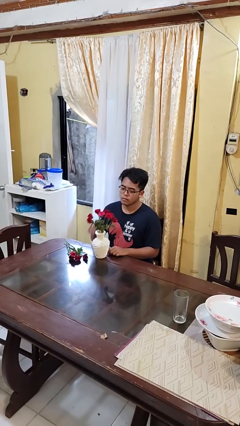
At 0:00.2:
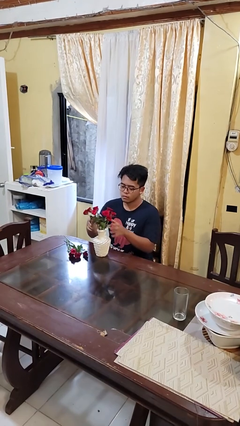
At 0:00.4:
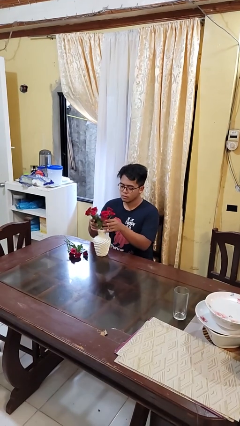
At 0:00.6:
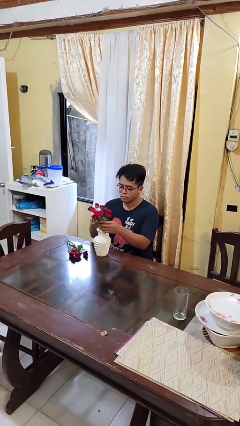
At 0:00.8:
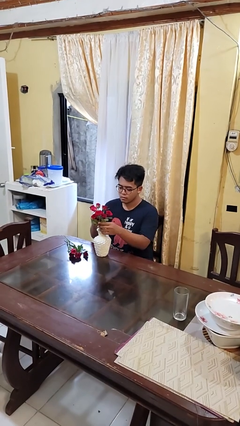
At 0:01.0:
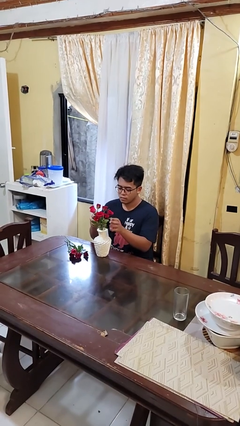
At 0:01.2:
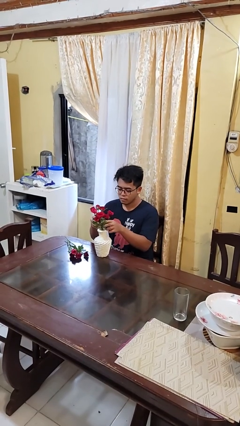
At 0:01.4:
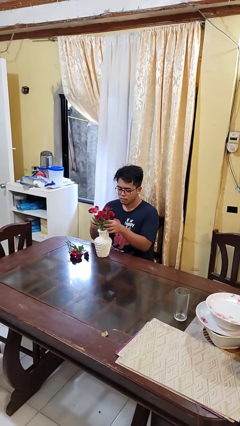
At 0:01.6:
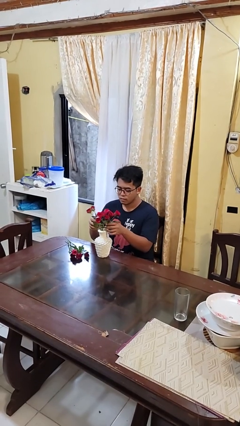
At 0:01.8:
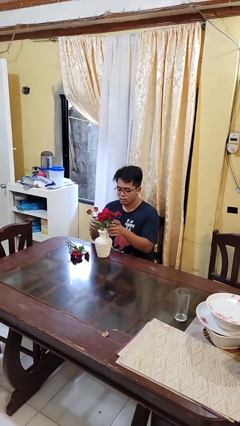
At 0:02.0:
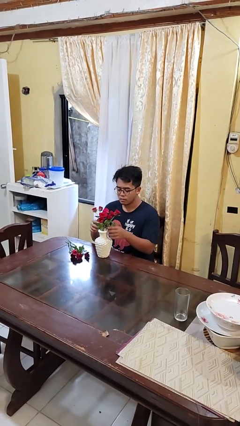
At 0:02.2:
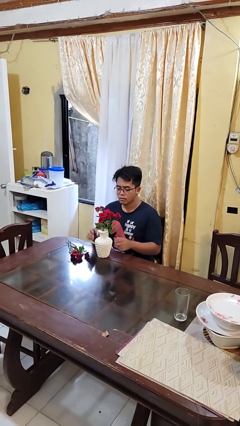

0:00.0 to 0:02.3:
person arranges flowers in vase

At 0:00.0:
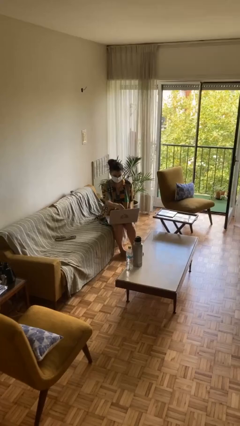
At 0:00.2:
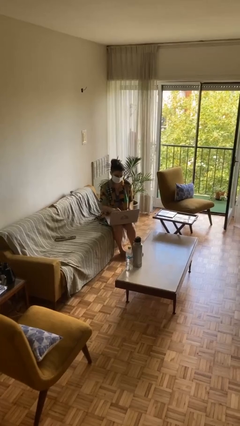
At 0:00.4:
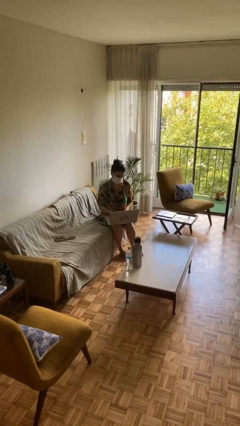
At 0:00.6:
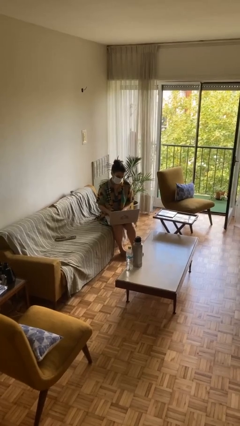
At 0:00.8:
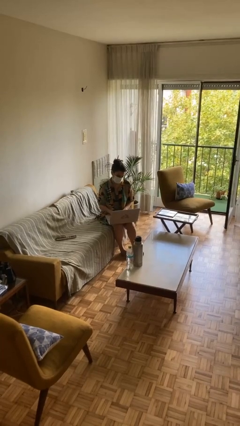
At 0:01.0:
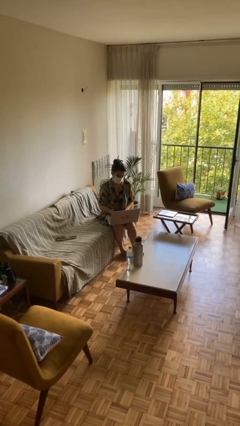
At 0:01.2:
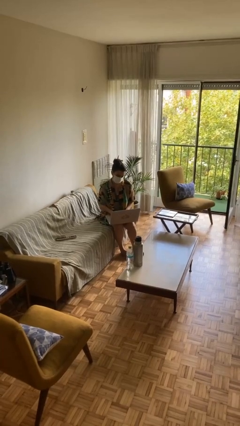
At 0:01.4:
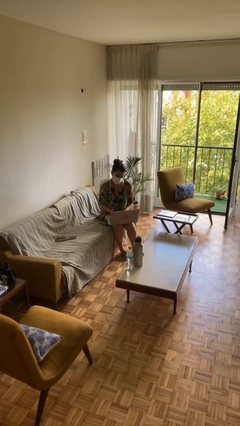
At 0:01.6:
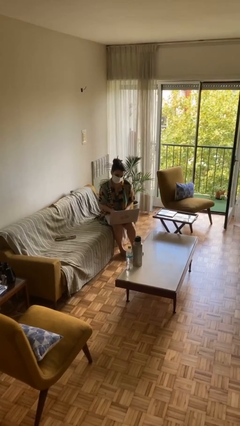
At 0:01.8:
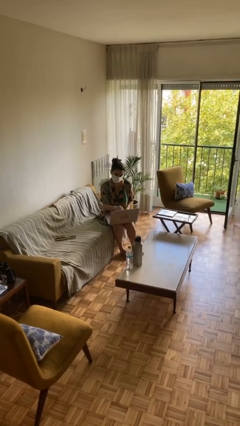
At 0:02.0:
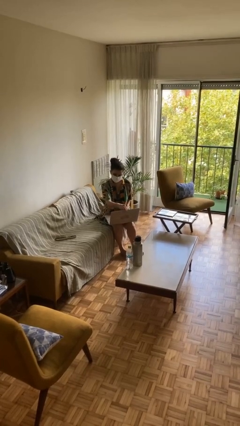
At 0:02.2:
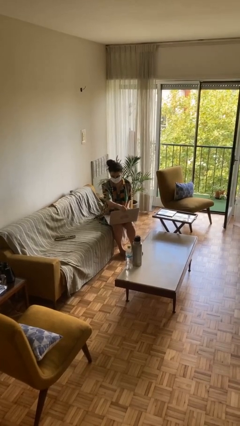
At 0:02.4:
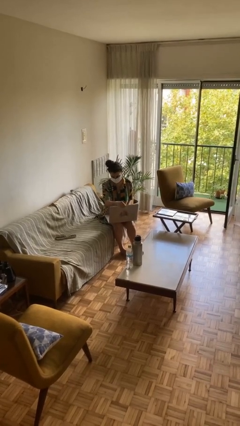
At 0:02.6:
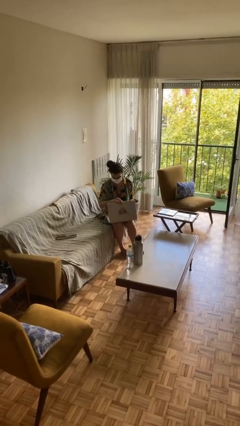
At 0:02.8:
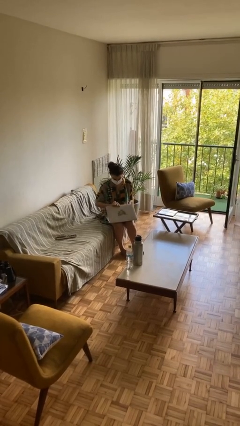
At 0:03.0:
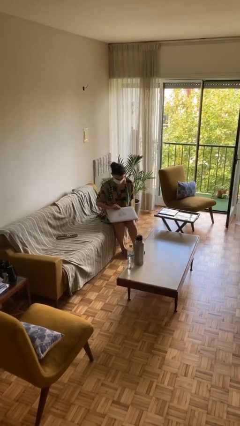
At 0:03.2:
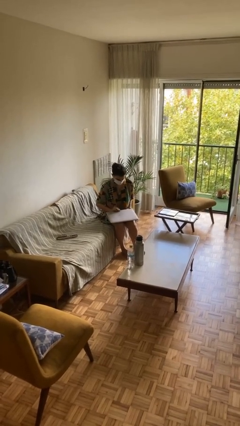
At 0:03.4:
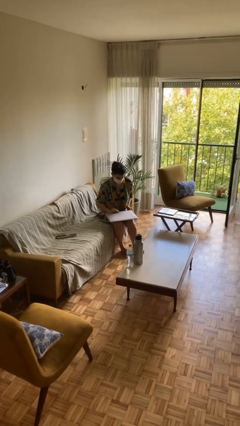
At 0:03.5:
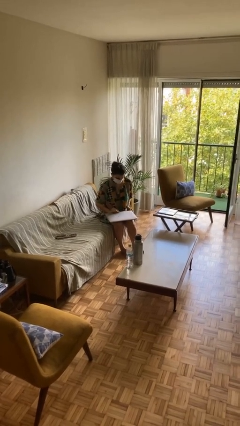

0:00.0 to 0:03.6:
person interacts with laptop

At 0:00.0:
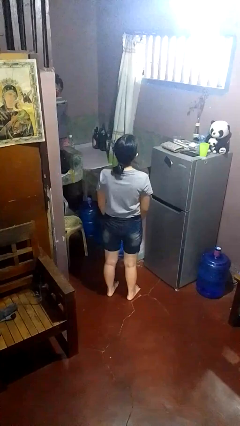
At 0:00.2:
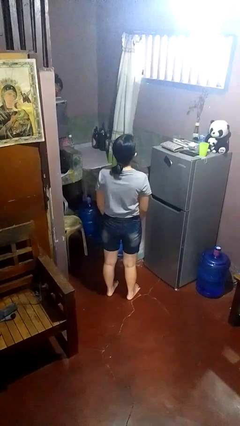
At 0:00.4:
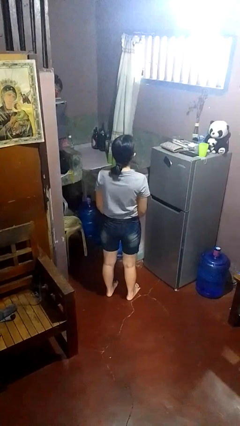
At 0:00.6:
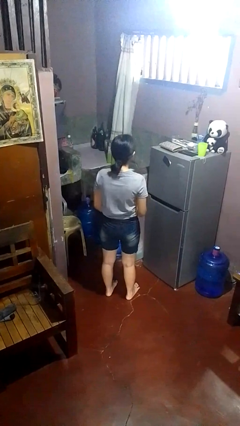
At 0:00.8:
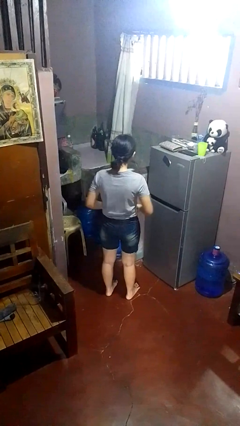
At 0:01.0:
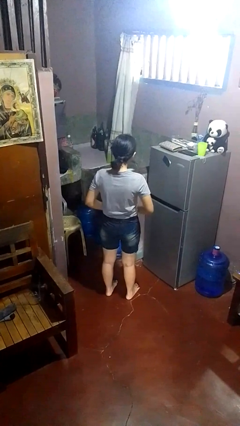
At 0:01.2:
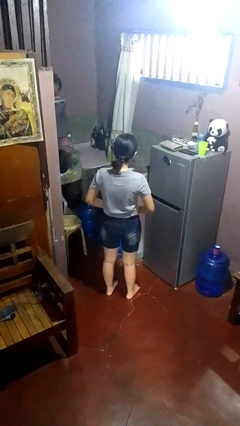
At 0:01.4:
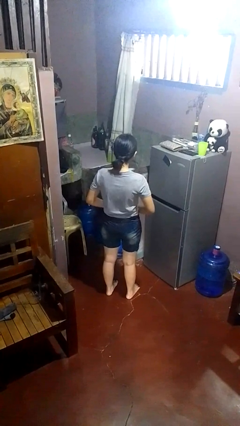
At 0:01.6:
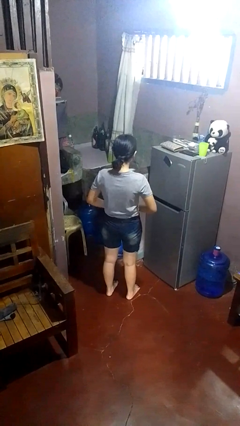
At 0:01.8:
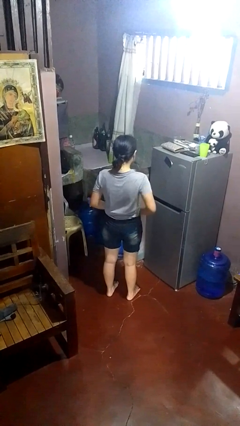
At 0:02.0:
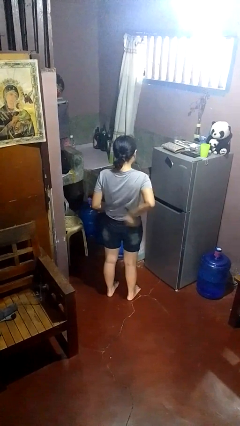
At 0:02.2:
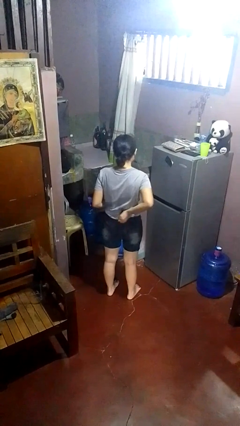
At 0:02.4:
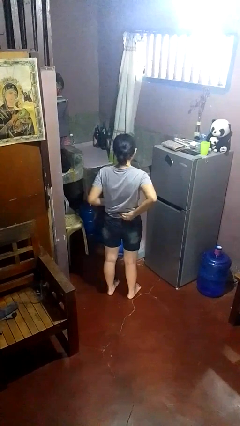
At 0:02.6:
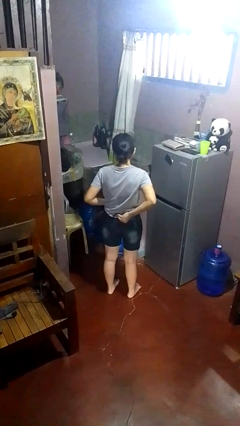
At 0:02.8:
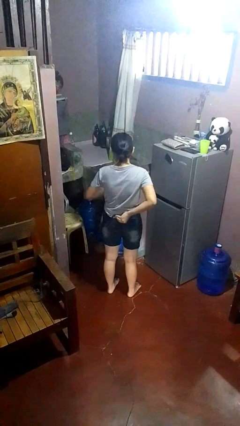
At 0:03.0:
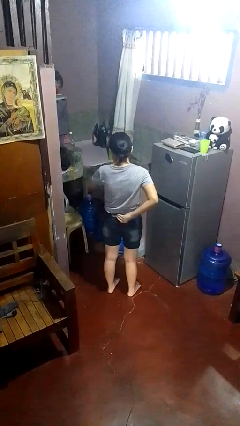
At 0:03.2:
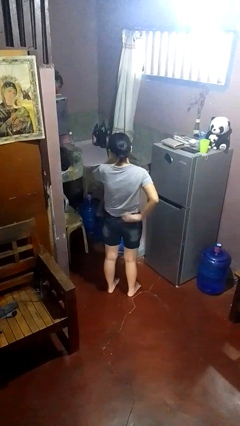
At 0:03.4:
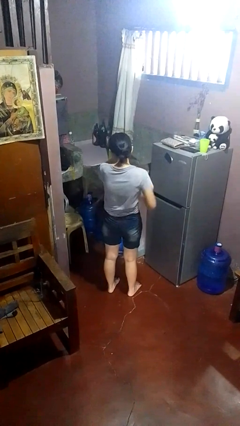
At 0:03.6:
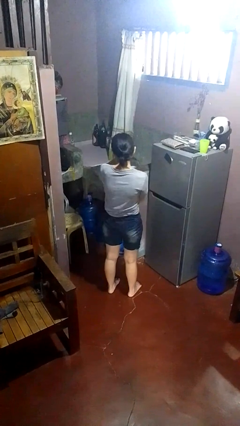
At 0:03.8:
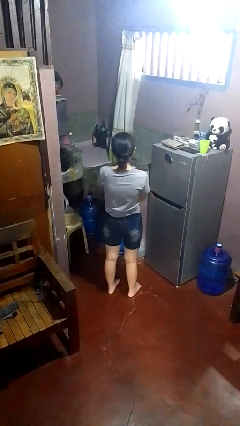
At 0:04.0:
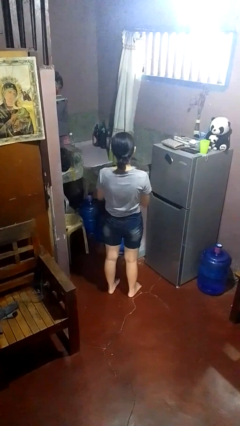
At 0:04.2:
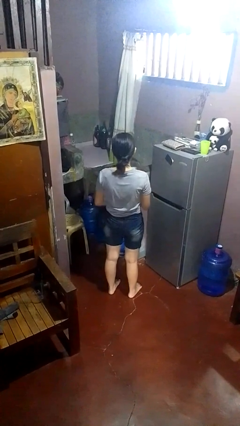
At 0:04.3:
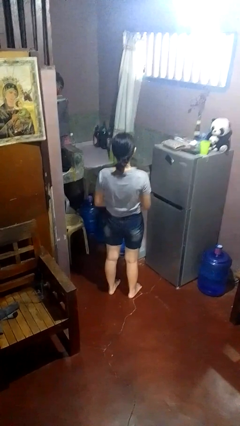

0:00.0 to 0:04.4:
person takes off belt

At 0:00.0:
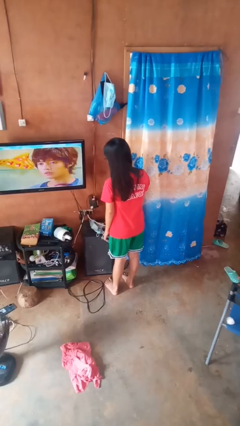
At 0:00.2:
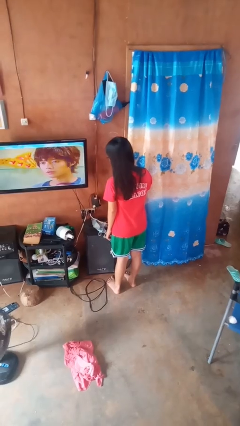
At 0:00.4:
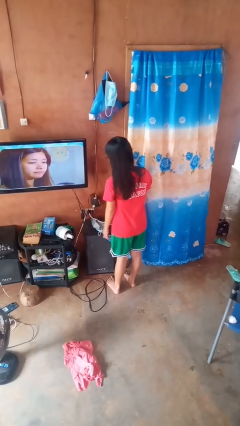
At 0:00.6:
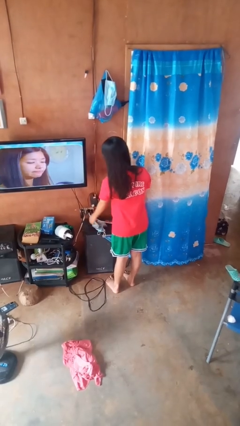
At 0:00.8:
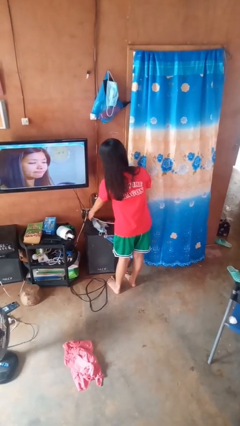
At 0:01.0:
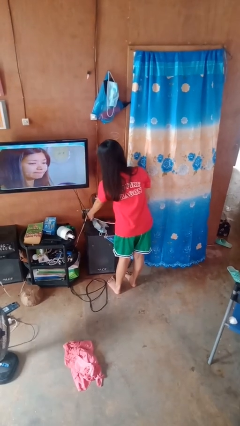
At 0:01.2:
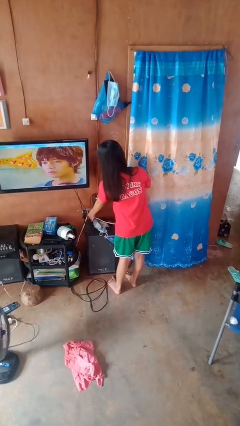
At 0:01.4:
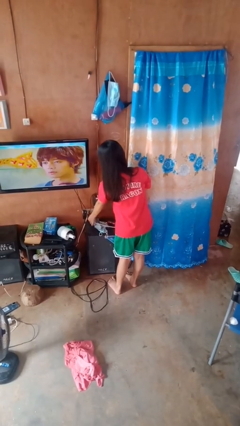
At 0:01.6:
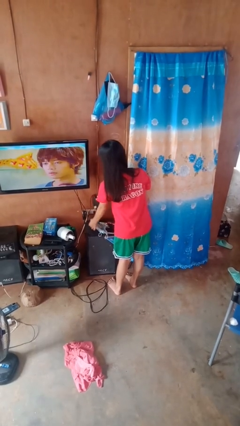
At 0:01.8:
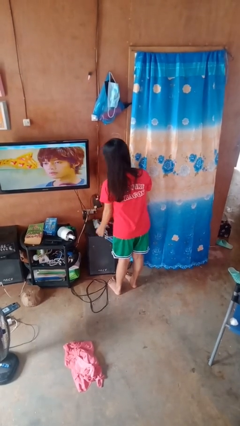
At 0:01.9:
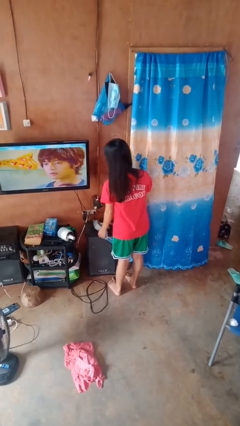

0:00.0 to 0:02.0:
person unplugs from electrical socket

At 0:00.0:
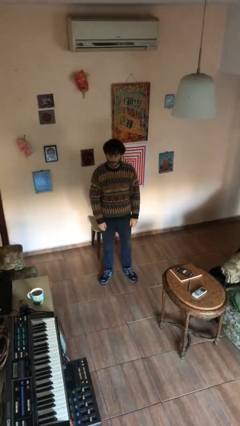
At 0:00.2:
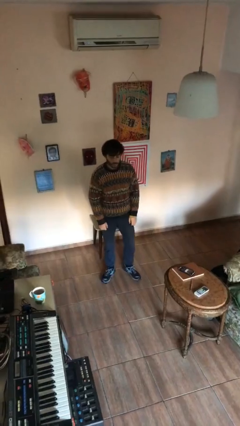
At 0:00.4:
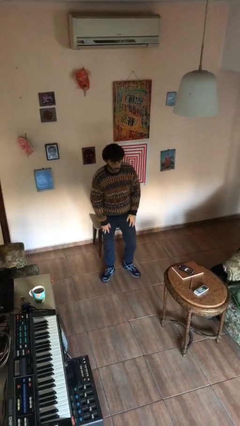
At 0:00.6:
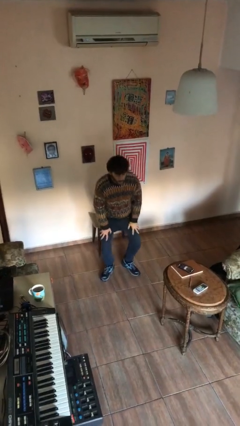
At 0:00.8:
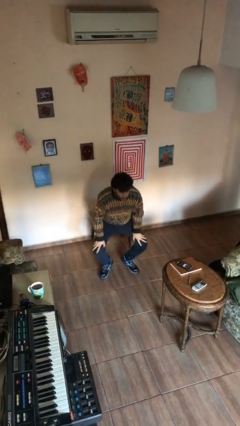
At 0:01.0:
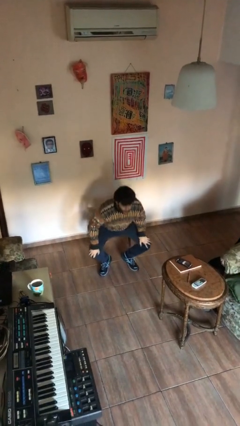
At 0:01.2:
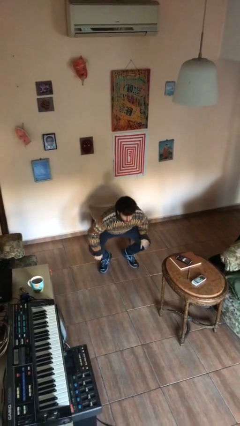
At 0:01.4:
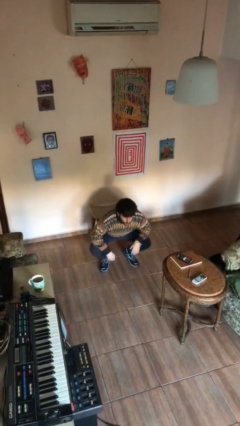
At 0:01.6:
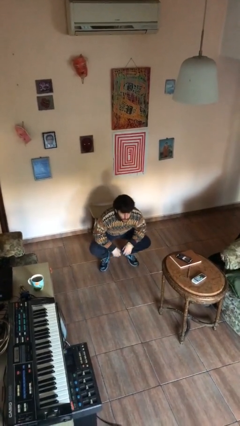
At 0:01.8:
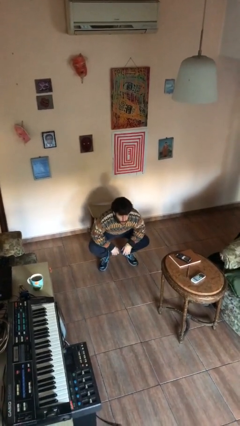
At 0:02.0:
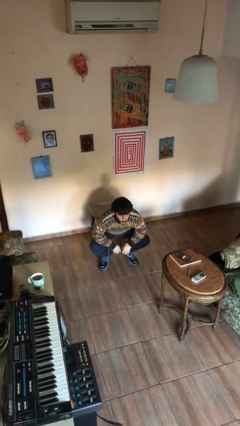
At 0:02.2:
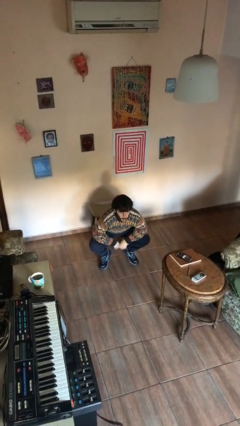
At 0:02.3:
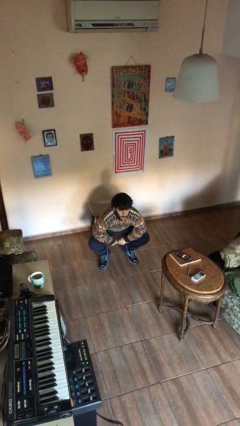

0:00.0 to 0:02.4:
person squats

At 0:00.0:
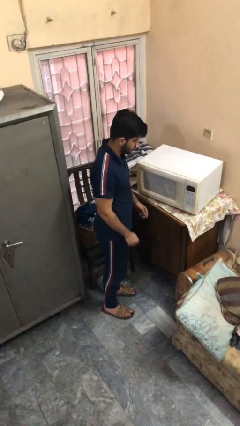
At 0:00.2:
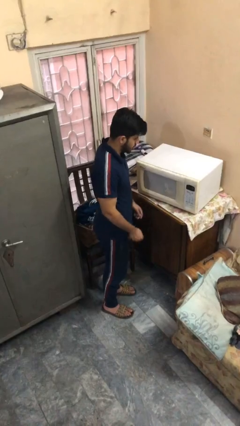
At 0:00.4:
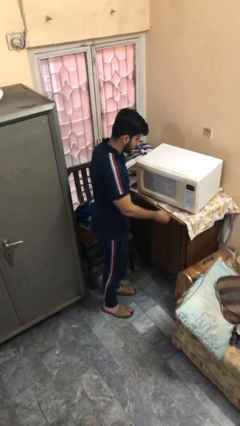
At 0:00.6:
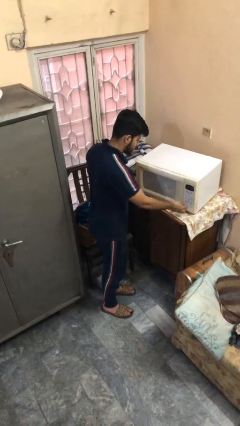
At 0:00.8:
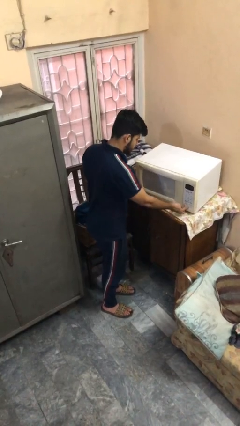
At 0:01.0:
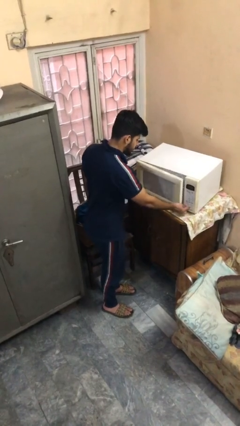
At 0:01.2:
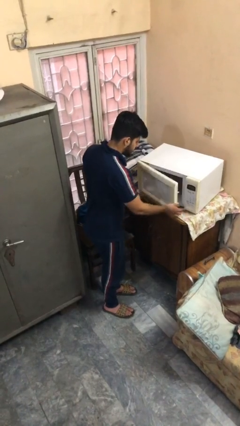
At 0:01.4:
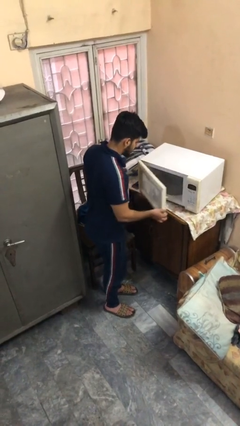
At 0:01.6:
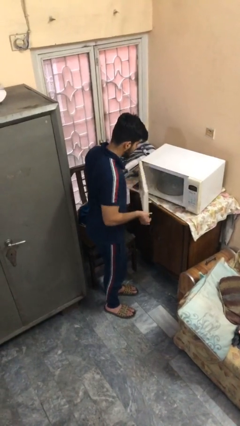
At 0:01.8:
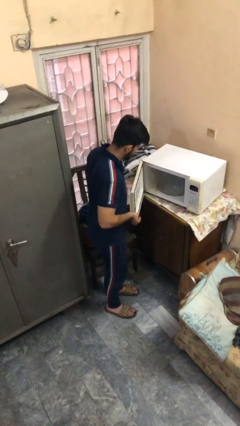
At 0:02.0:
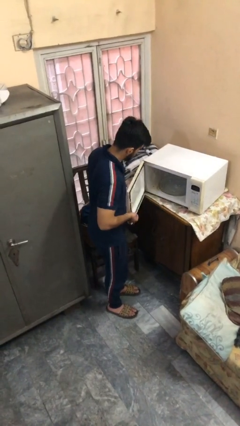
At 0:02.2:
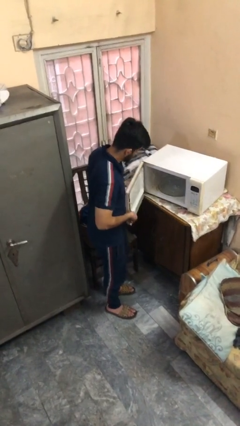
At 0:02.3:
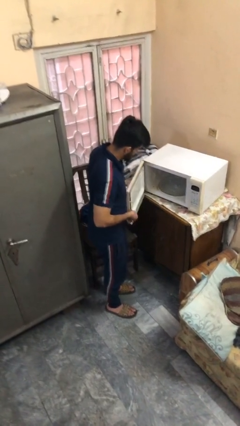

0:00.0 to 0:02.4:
person opens microwave
